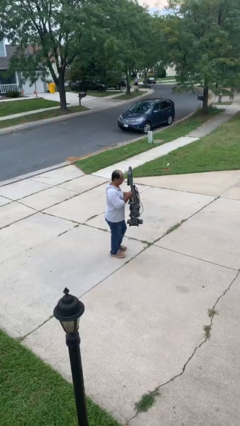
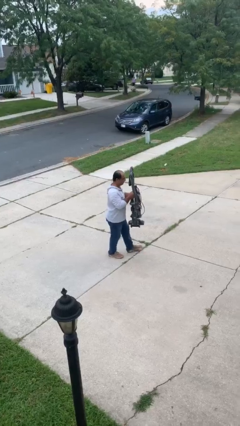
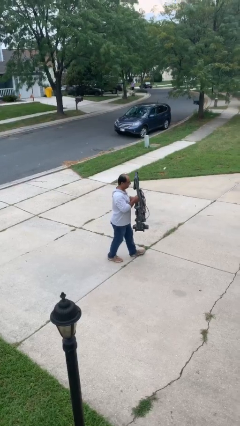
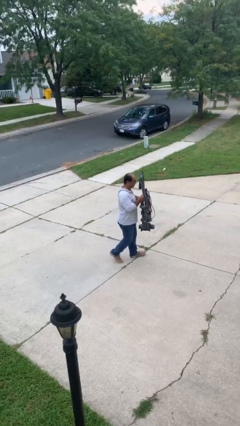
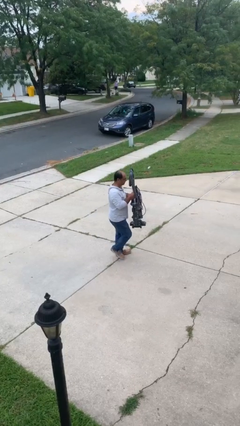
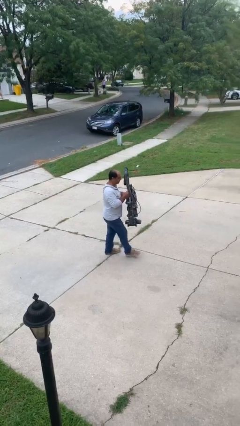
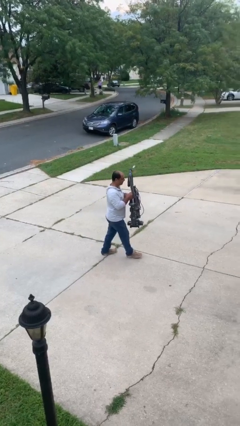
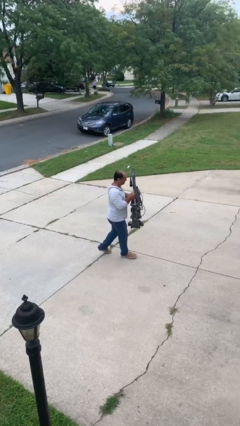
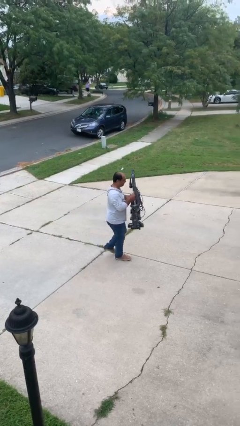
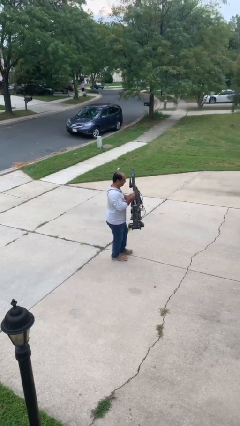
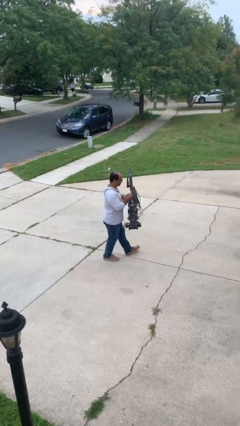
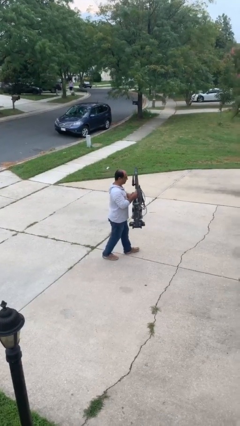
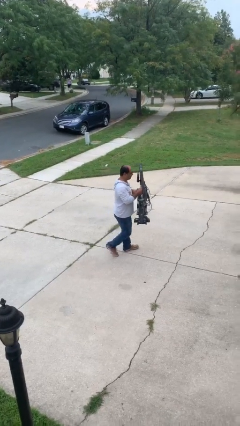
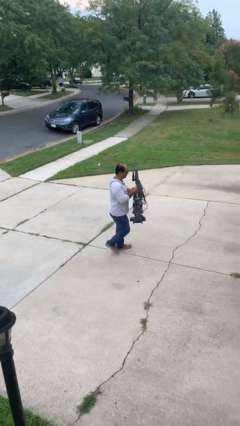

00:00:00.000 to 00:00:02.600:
person carries heavy object

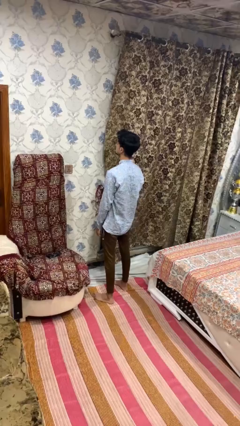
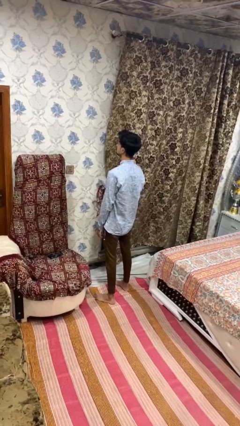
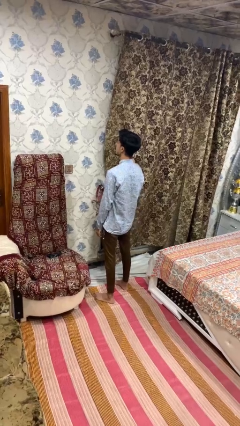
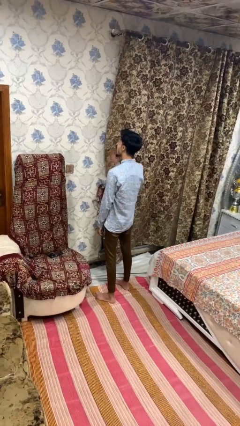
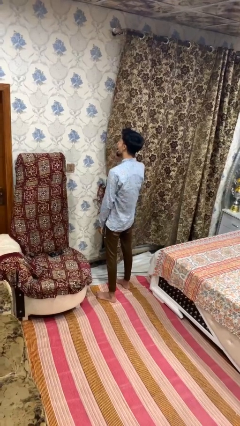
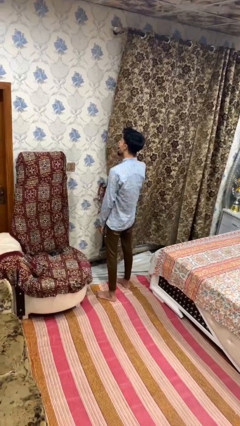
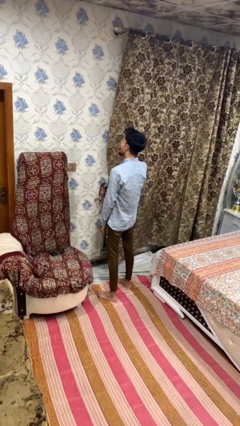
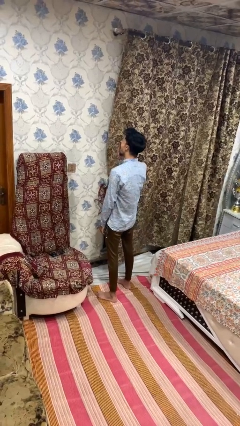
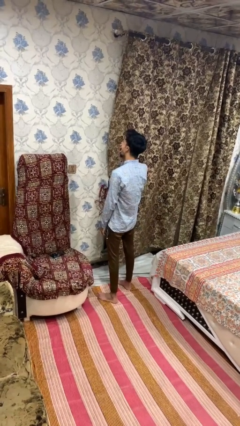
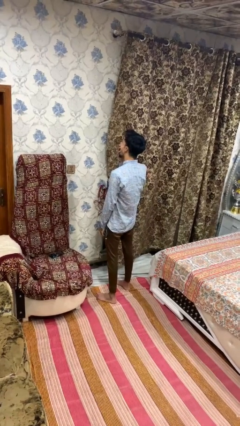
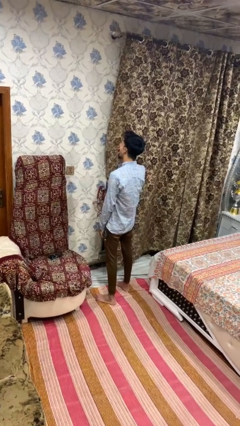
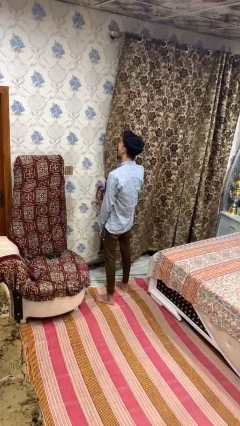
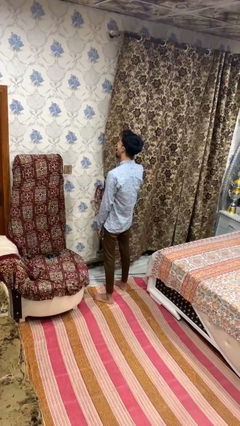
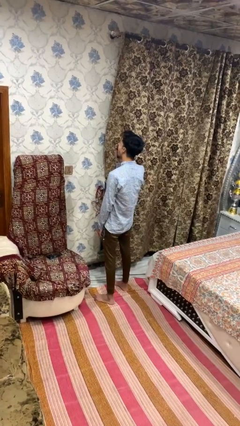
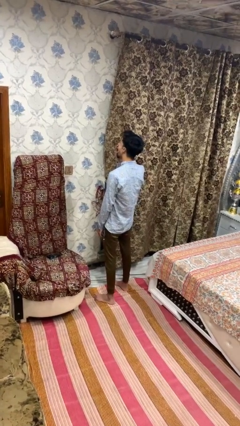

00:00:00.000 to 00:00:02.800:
person yawns

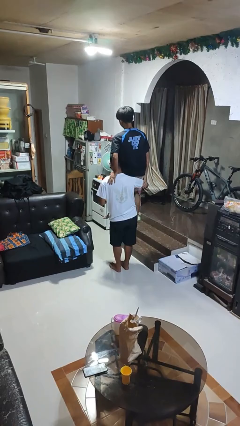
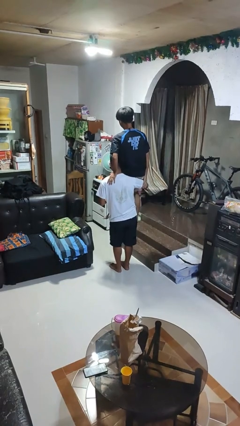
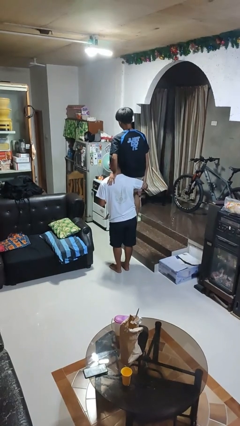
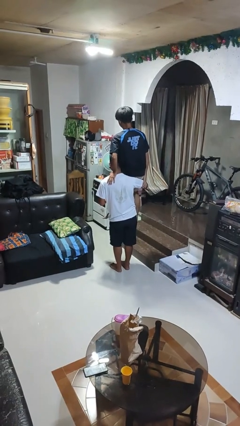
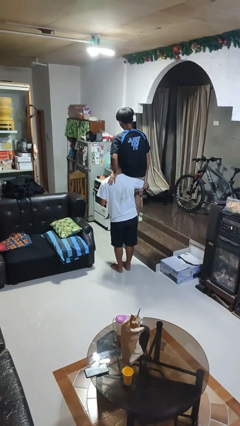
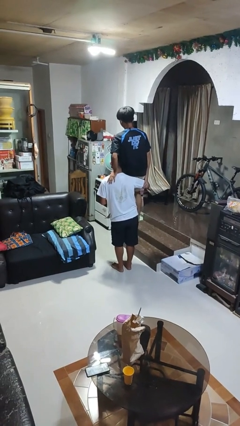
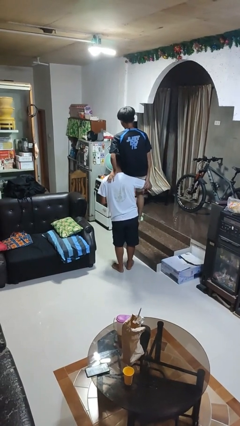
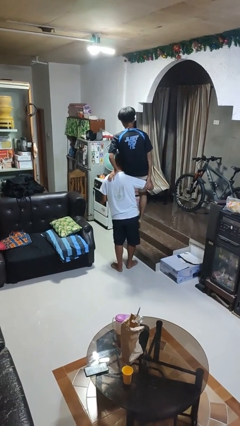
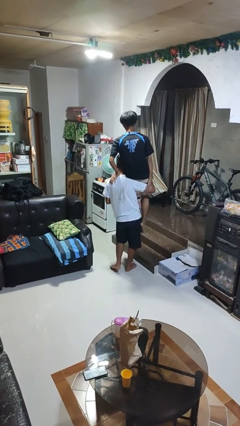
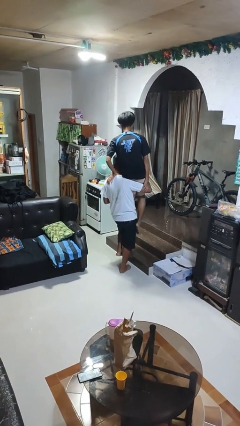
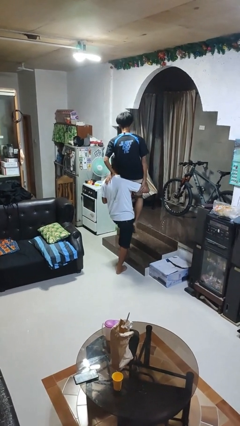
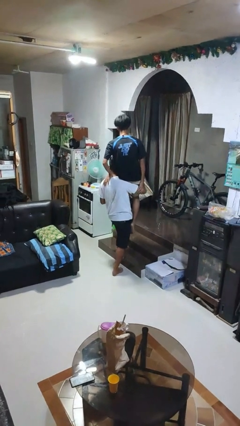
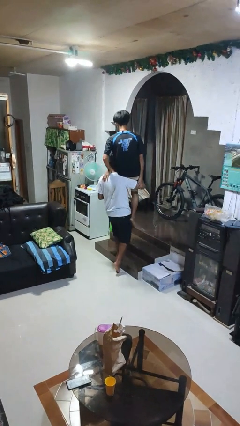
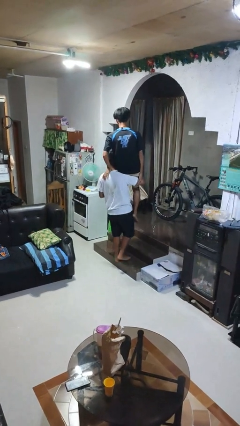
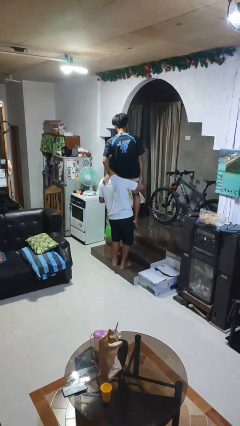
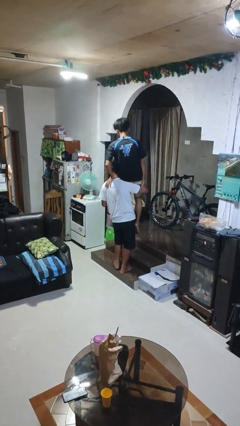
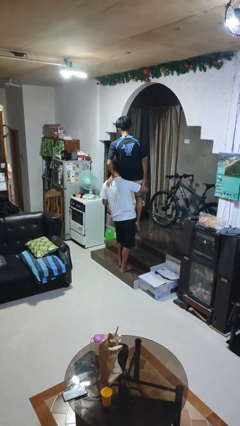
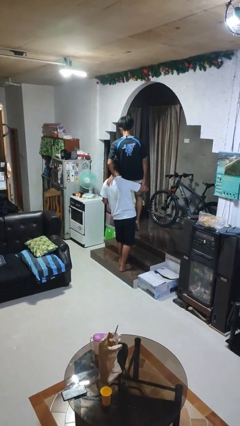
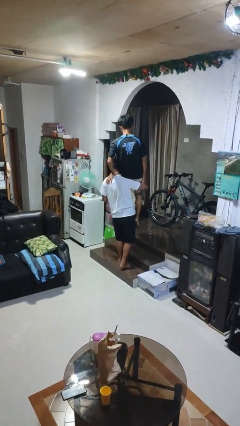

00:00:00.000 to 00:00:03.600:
person carries person on shoulders

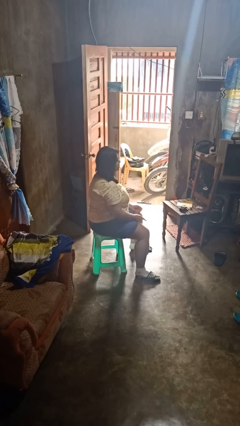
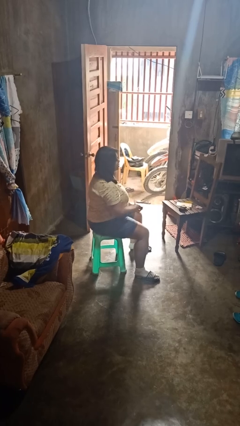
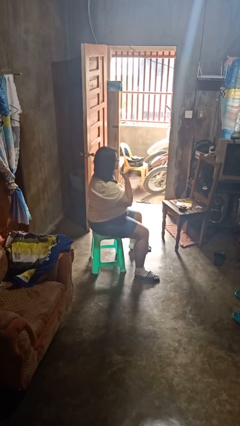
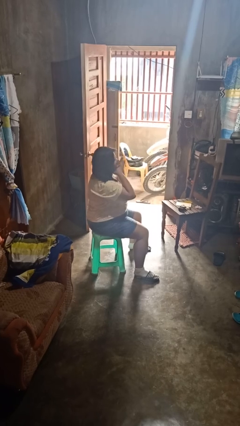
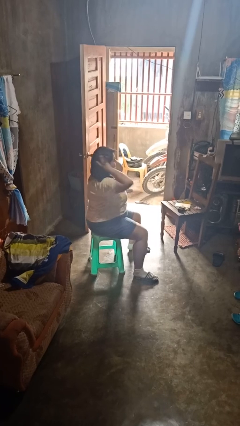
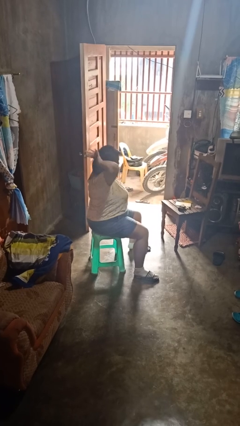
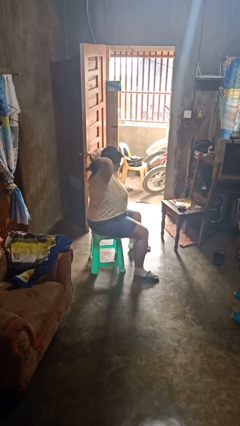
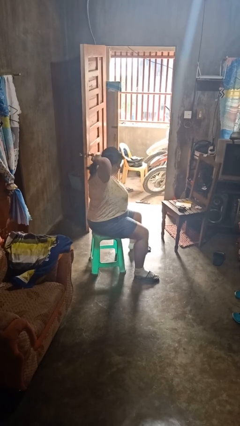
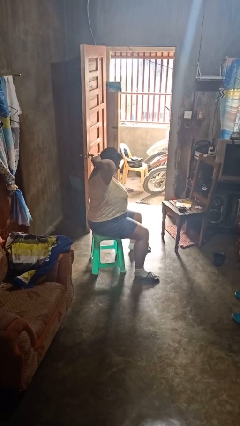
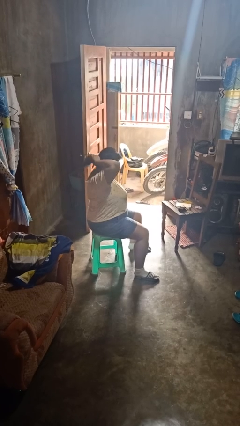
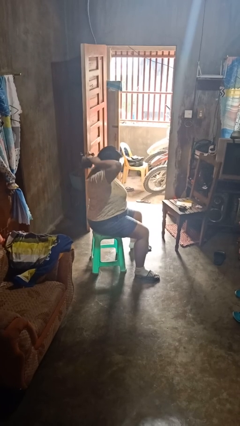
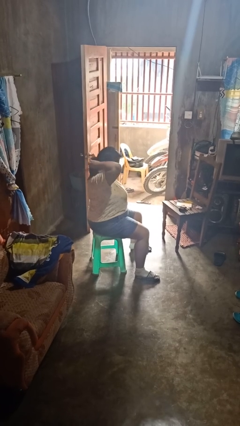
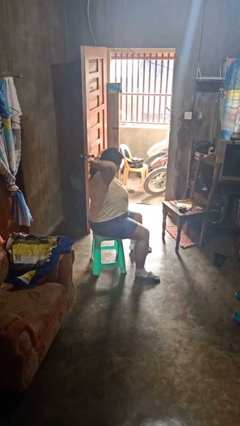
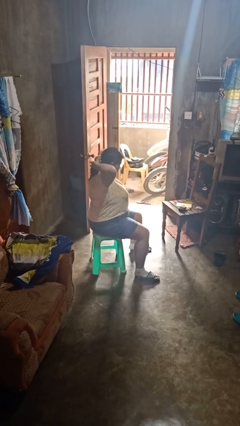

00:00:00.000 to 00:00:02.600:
person puts hair in ponytail

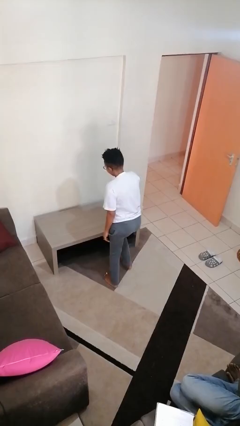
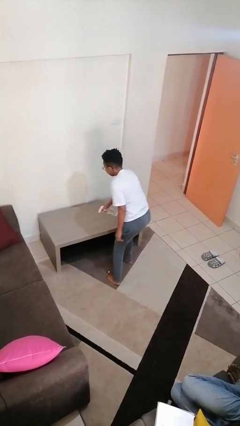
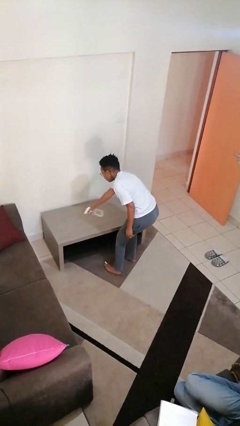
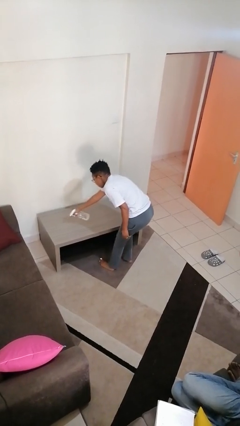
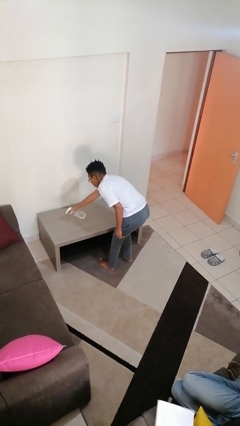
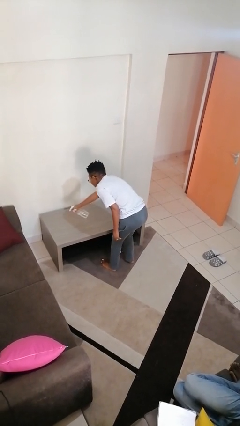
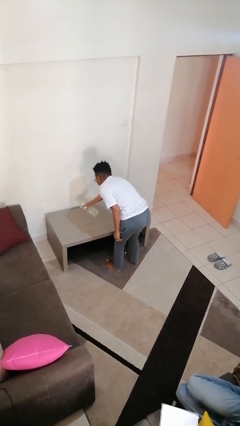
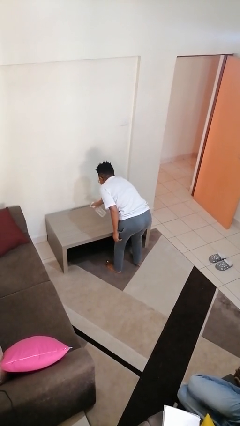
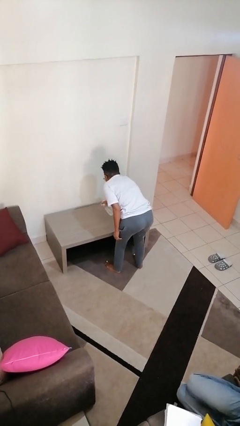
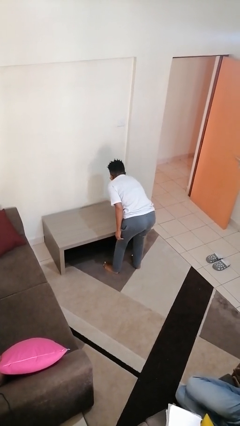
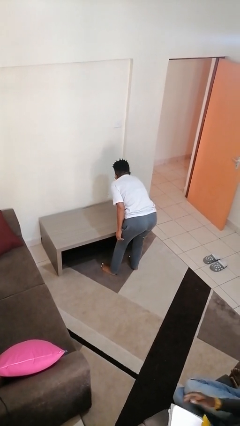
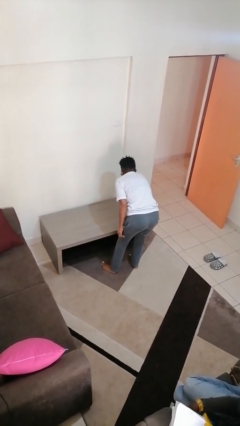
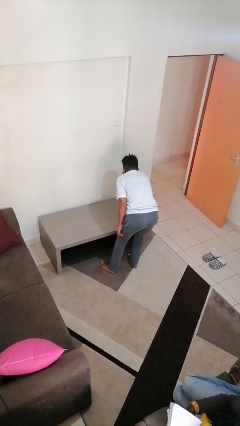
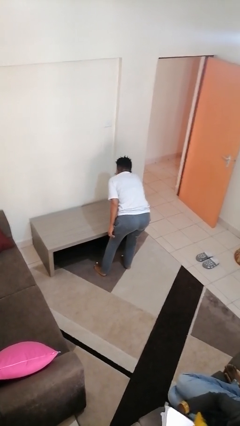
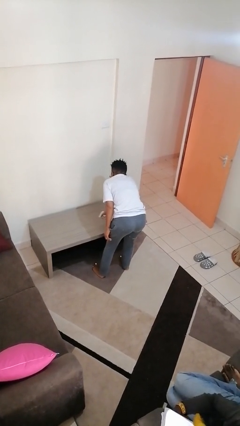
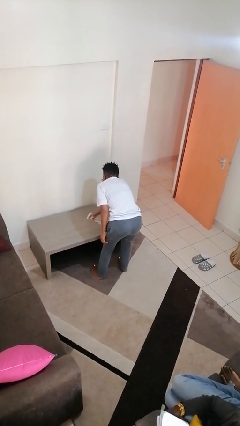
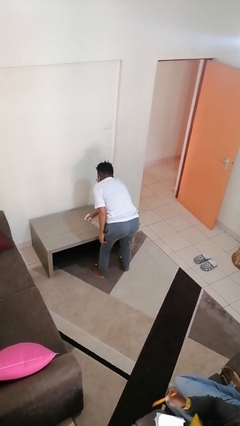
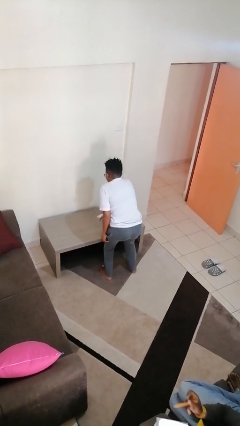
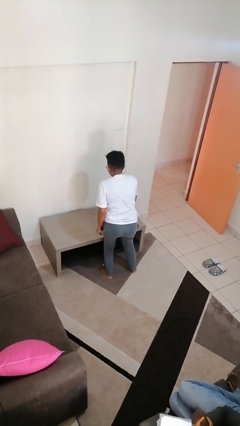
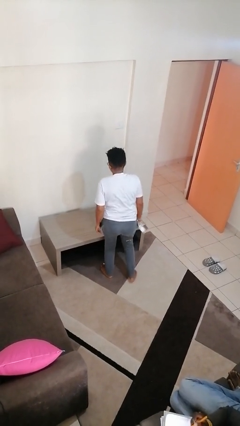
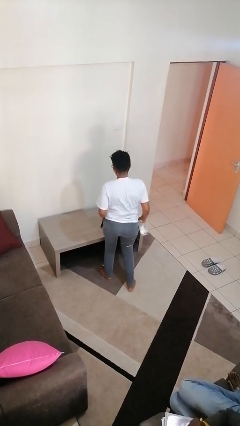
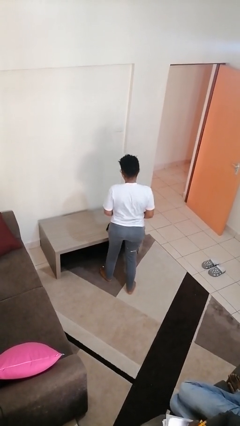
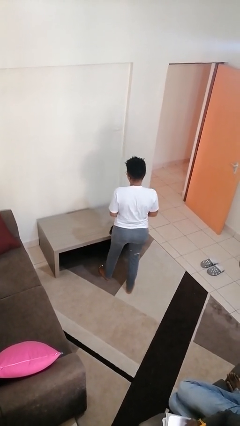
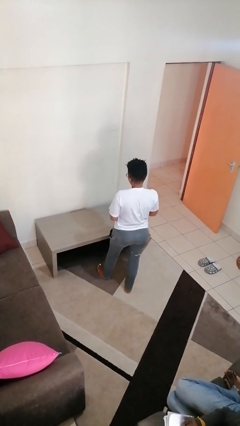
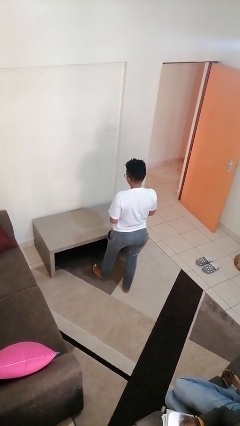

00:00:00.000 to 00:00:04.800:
person sprays from bottle

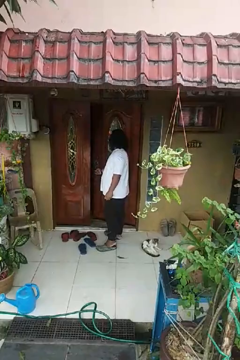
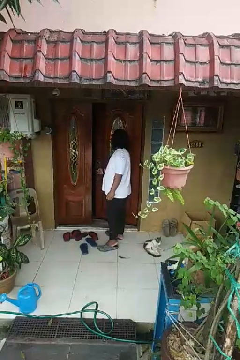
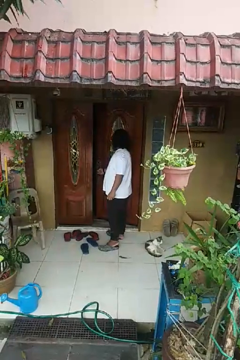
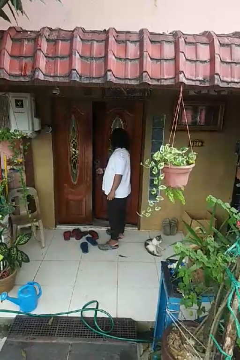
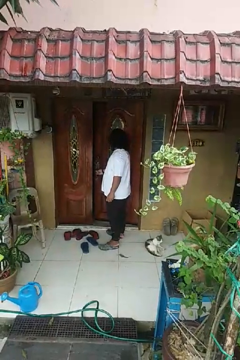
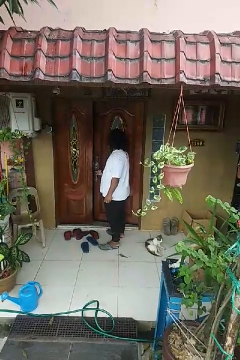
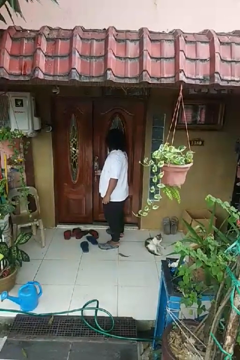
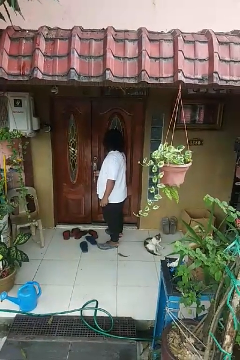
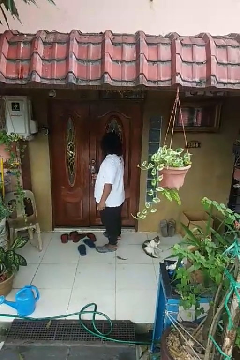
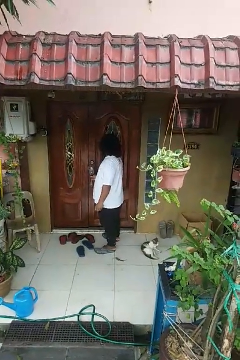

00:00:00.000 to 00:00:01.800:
person closes facility door
